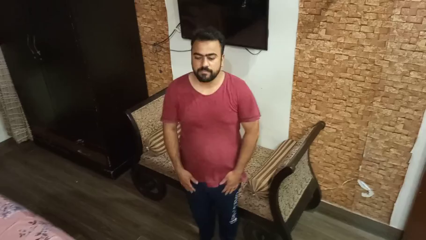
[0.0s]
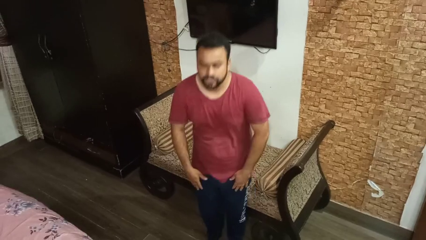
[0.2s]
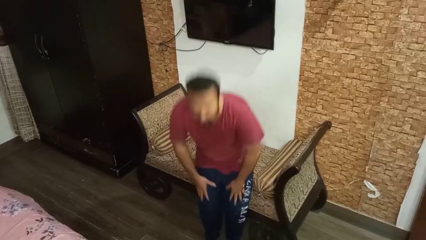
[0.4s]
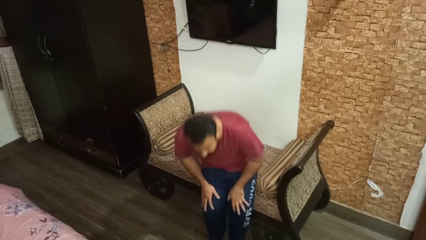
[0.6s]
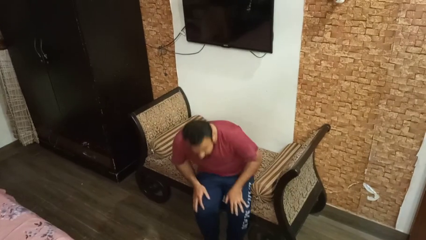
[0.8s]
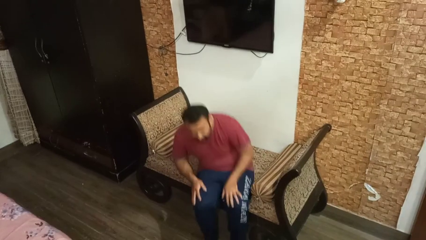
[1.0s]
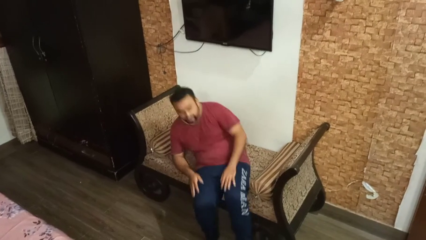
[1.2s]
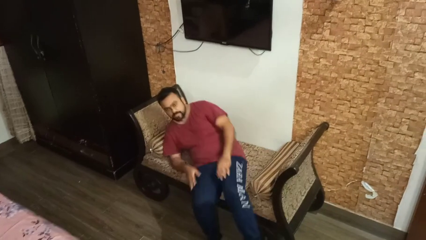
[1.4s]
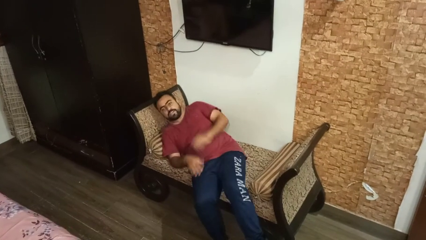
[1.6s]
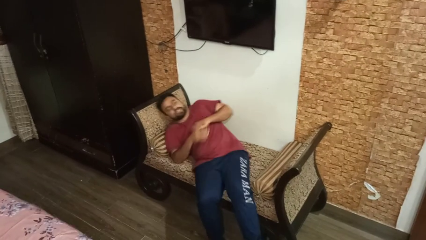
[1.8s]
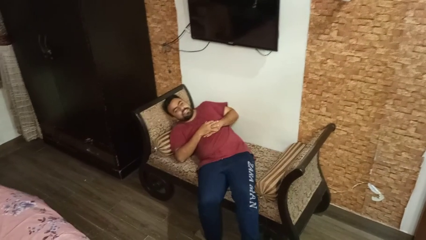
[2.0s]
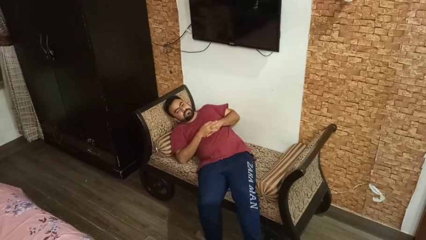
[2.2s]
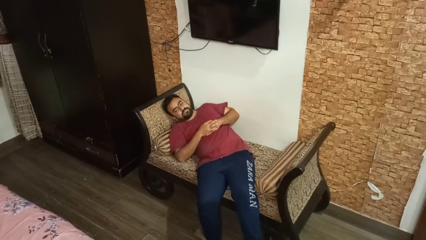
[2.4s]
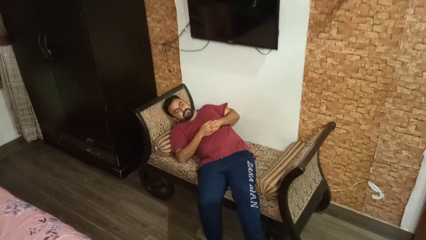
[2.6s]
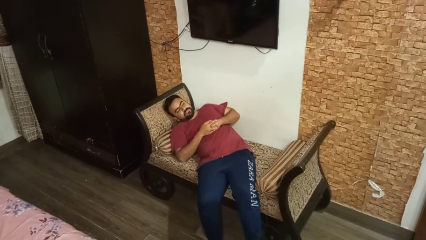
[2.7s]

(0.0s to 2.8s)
person lies down on couch

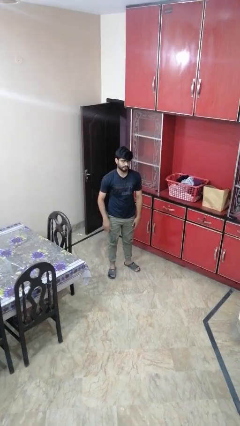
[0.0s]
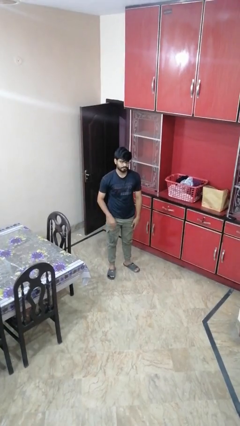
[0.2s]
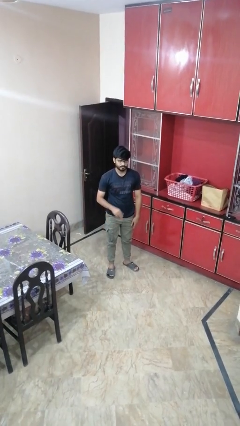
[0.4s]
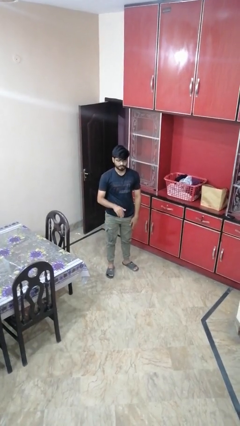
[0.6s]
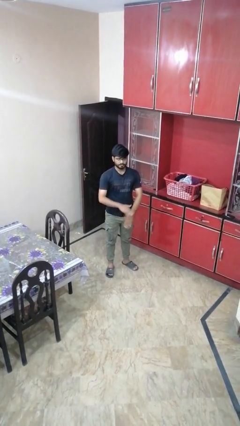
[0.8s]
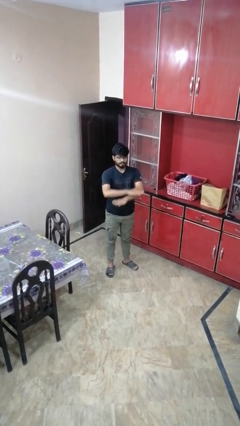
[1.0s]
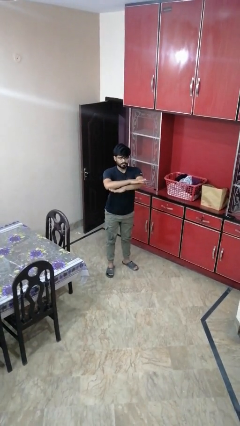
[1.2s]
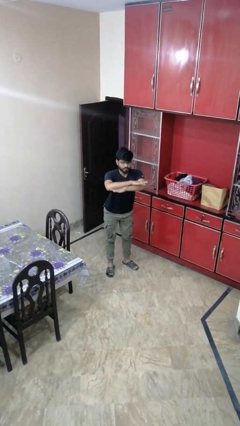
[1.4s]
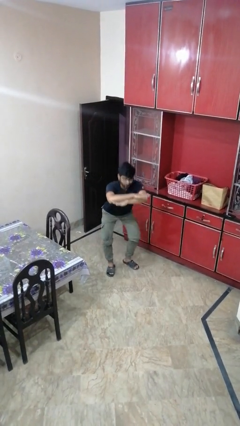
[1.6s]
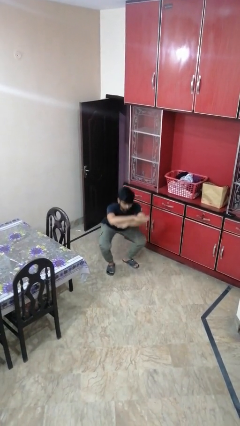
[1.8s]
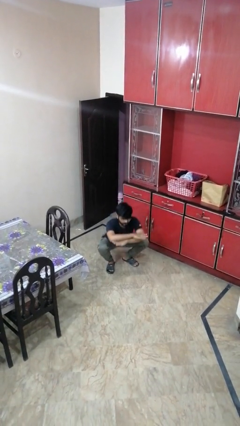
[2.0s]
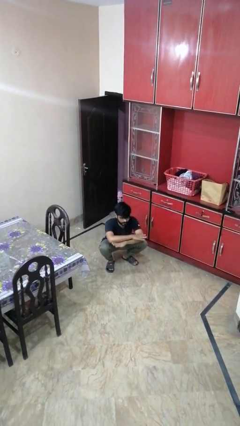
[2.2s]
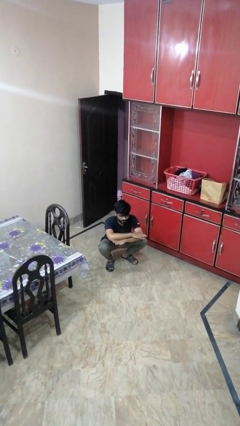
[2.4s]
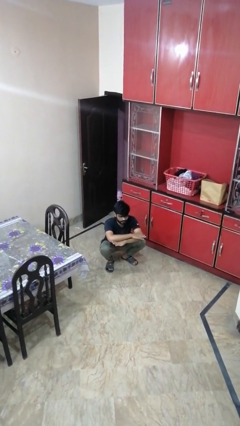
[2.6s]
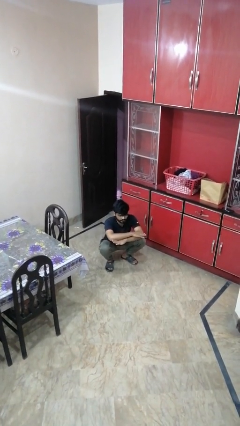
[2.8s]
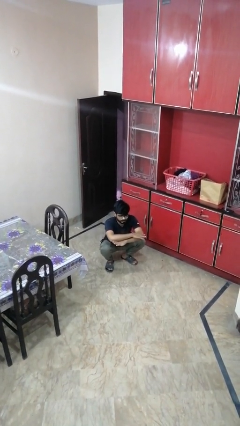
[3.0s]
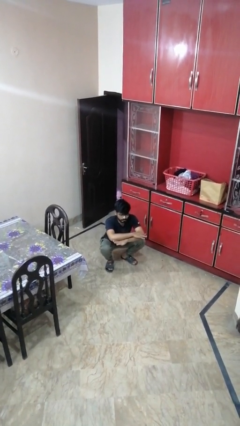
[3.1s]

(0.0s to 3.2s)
person squats

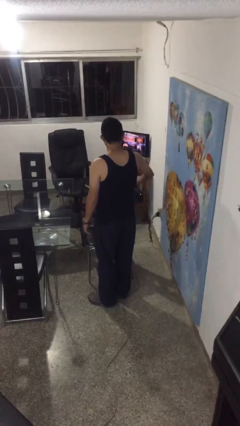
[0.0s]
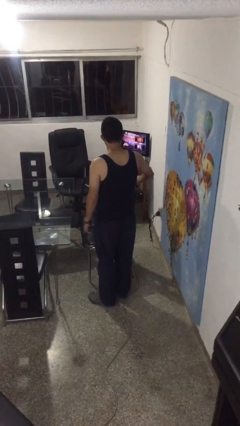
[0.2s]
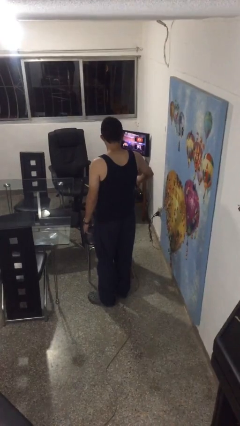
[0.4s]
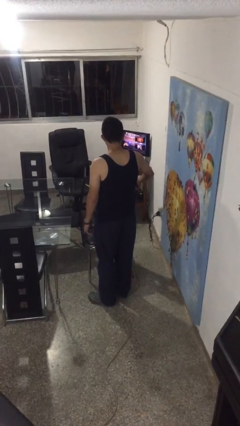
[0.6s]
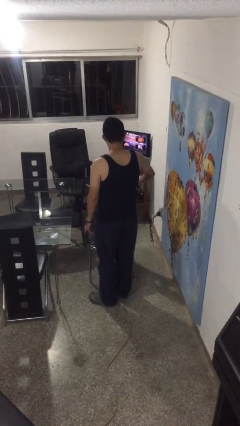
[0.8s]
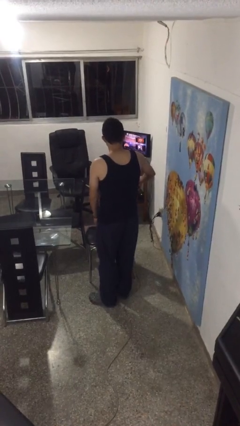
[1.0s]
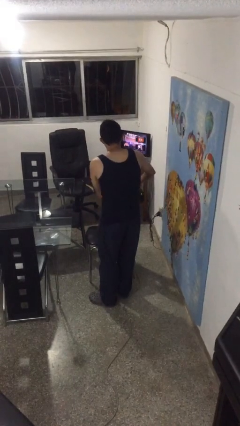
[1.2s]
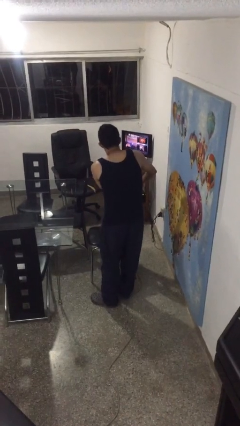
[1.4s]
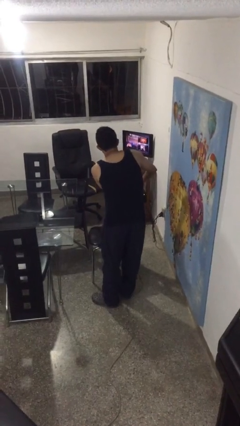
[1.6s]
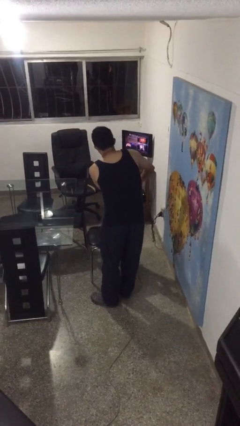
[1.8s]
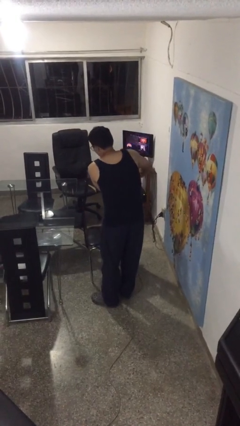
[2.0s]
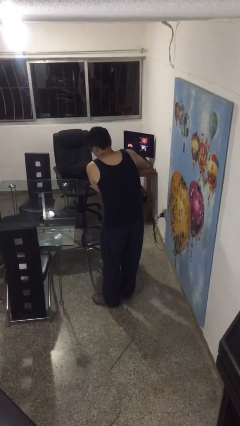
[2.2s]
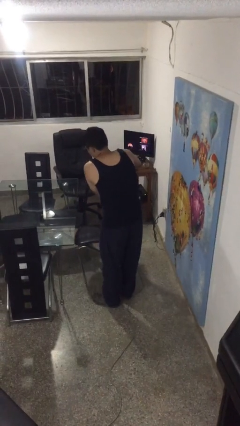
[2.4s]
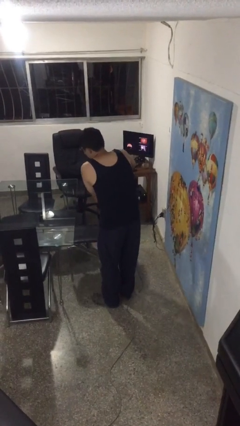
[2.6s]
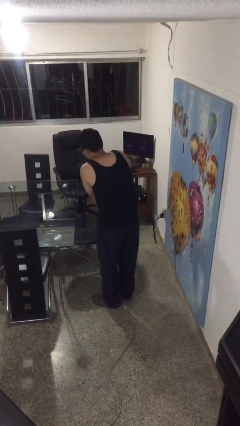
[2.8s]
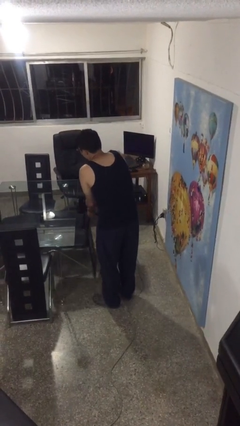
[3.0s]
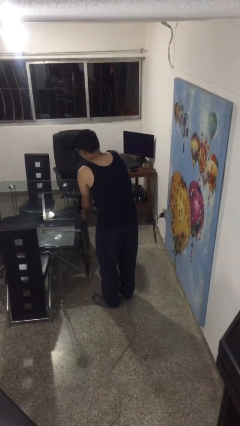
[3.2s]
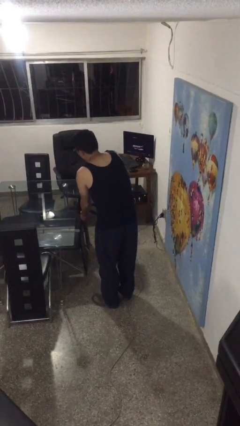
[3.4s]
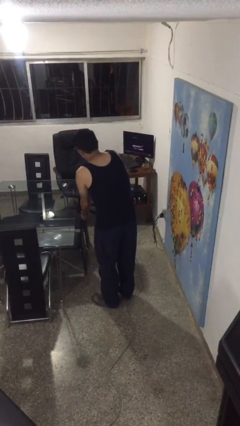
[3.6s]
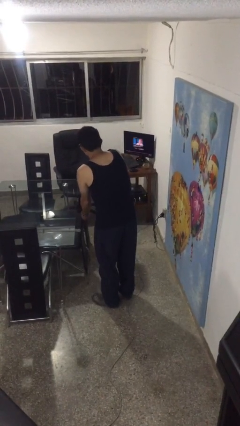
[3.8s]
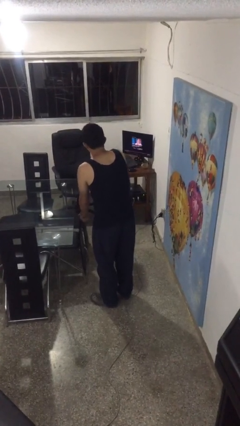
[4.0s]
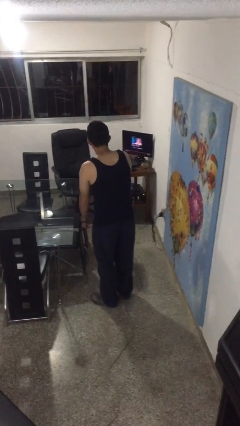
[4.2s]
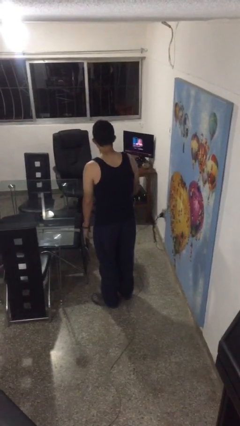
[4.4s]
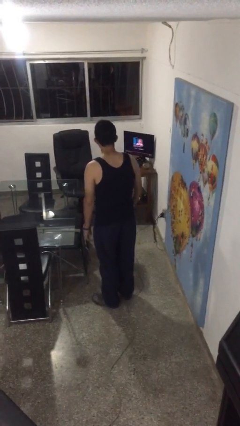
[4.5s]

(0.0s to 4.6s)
person pushes in chair

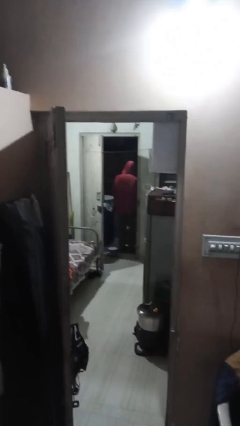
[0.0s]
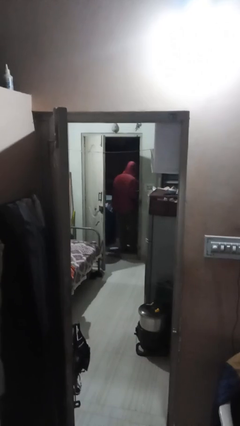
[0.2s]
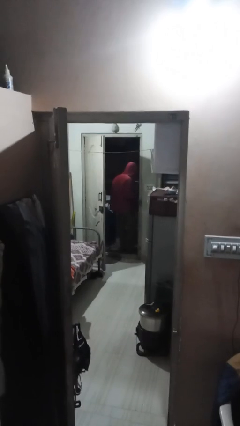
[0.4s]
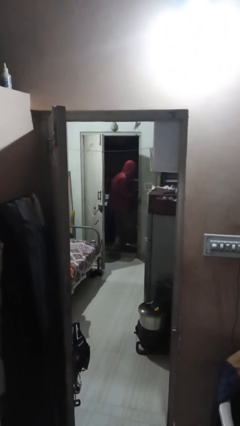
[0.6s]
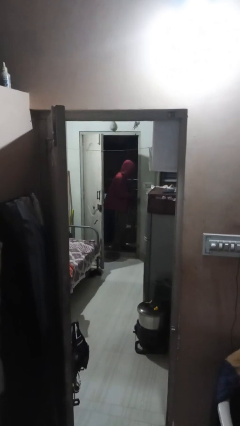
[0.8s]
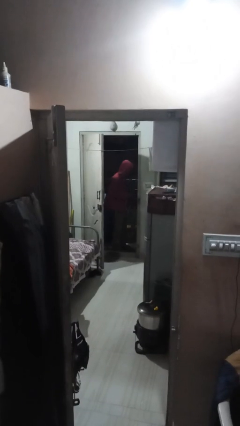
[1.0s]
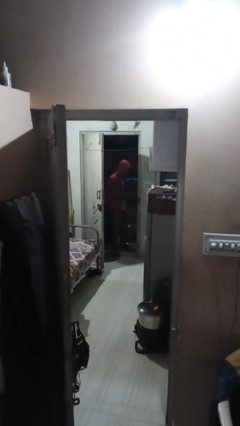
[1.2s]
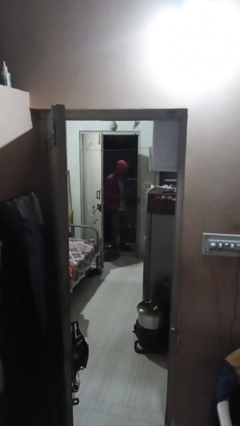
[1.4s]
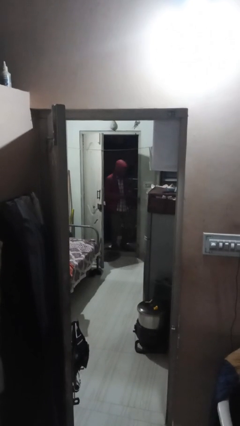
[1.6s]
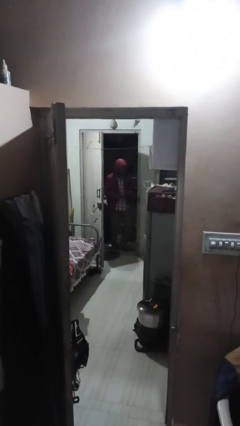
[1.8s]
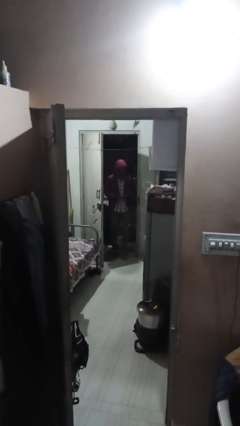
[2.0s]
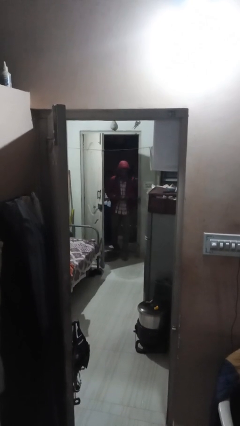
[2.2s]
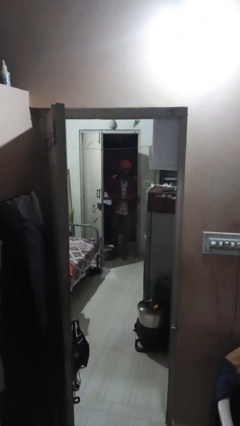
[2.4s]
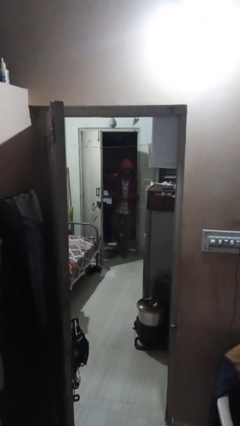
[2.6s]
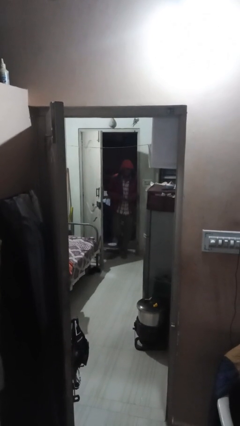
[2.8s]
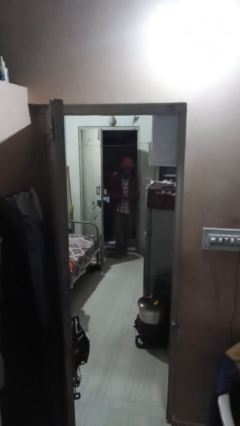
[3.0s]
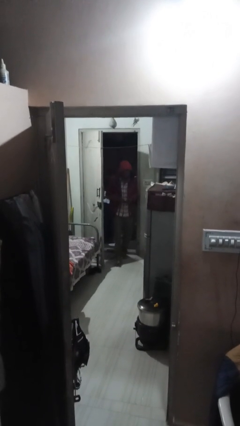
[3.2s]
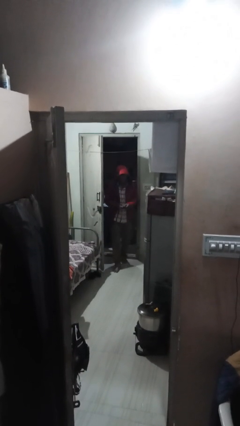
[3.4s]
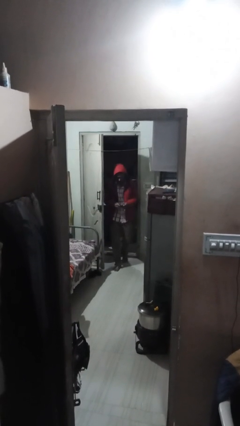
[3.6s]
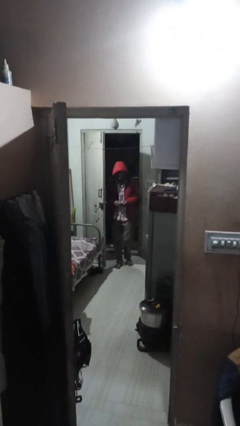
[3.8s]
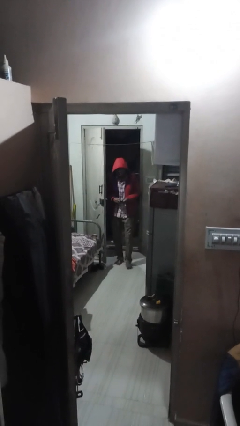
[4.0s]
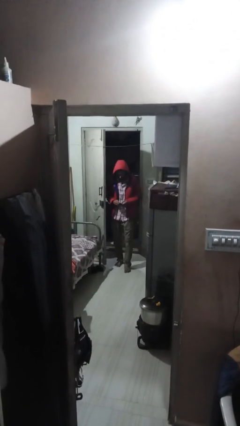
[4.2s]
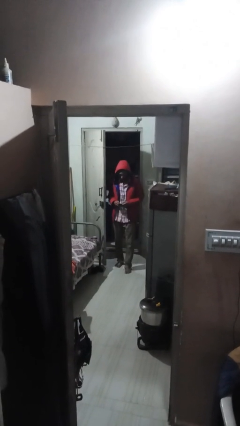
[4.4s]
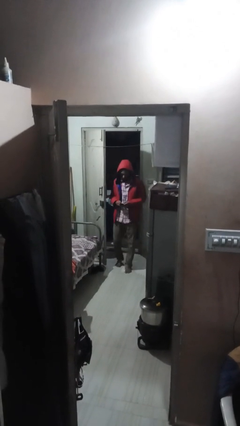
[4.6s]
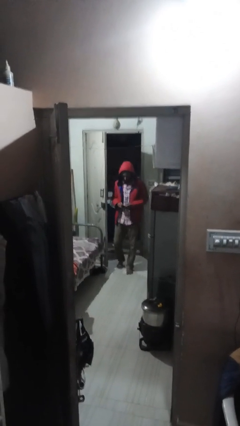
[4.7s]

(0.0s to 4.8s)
person enters scene through structure

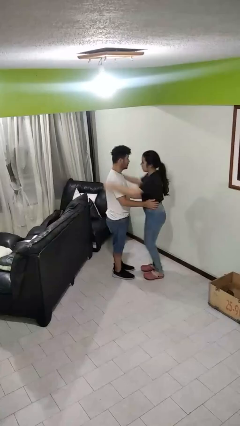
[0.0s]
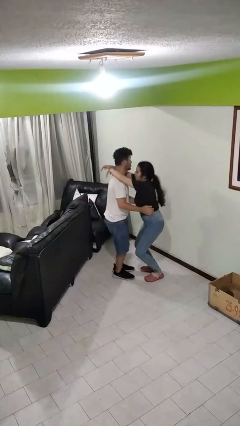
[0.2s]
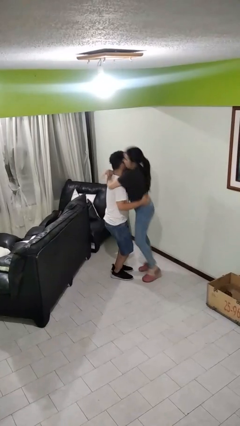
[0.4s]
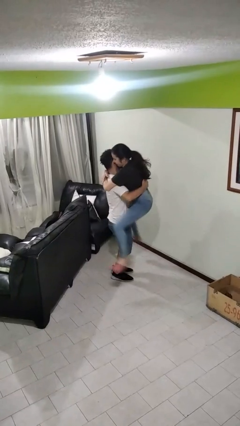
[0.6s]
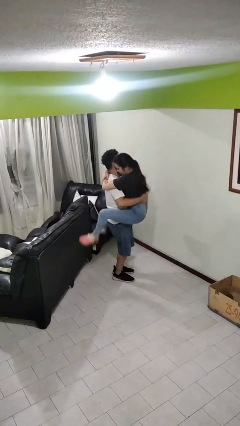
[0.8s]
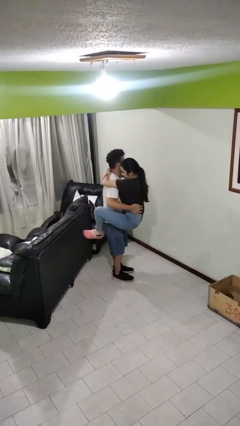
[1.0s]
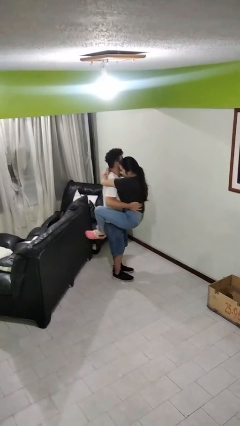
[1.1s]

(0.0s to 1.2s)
person picks up person

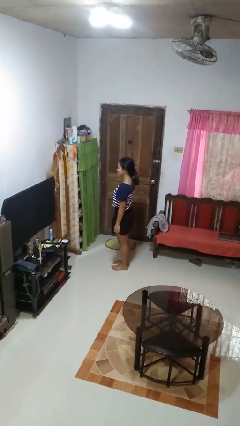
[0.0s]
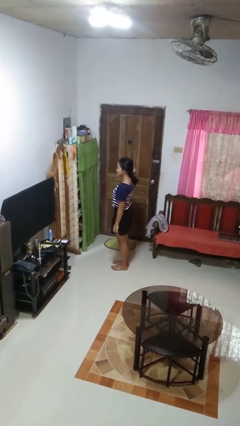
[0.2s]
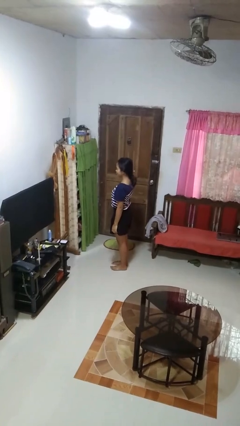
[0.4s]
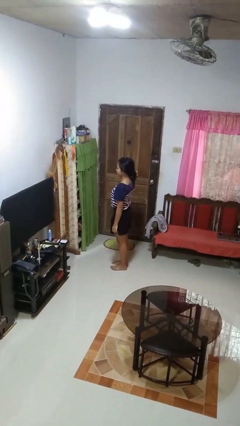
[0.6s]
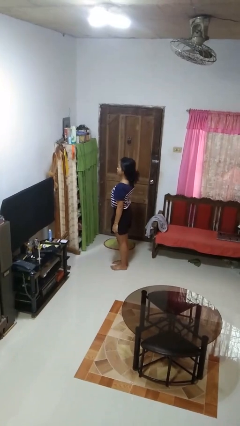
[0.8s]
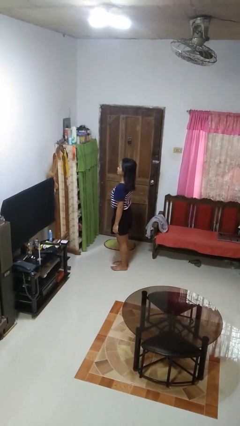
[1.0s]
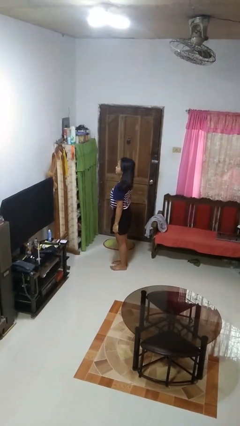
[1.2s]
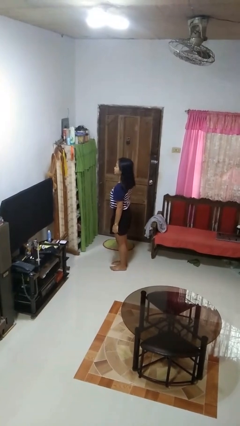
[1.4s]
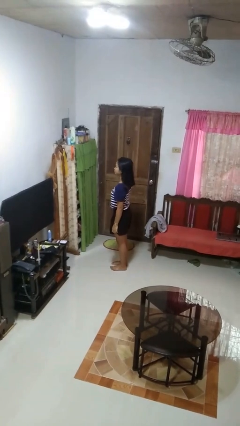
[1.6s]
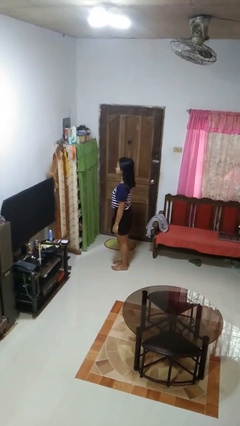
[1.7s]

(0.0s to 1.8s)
person takes off hairtie
